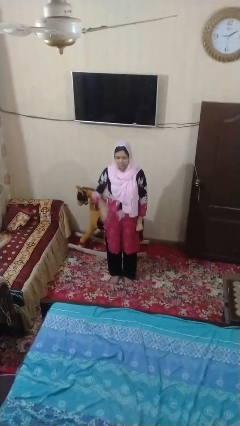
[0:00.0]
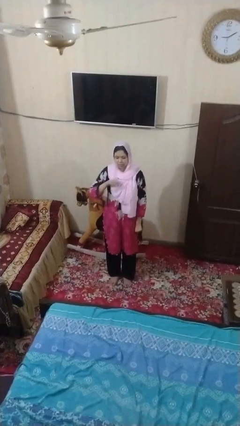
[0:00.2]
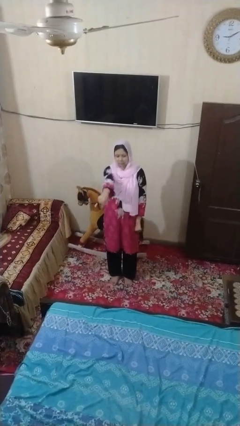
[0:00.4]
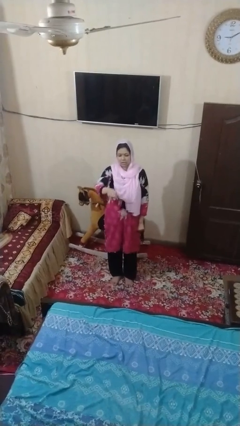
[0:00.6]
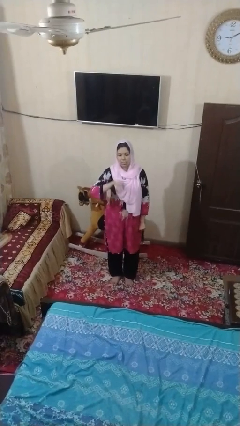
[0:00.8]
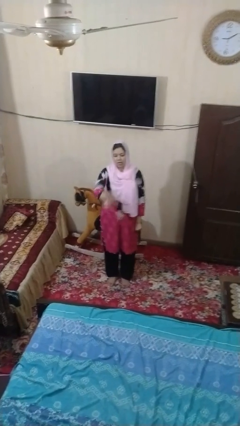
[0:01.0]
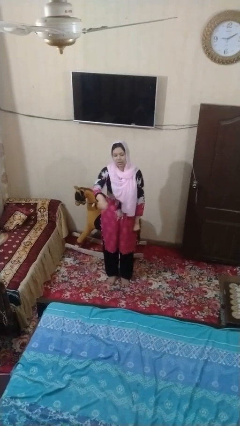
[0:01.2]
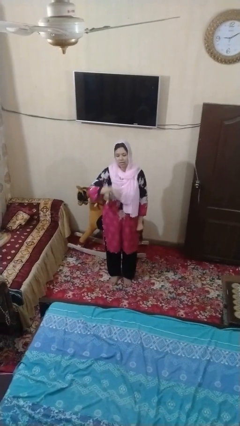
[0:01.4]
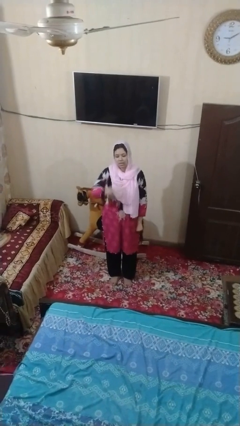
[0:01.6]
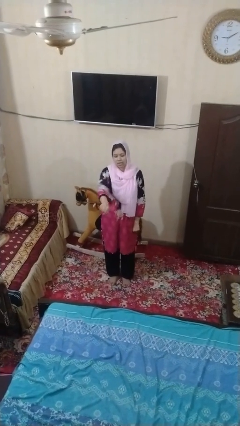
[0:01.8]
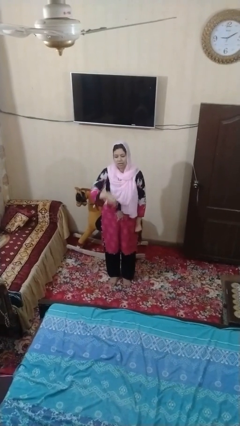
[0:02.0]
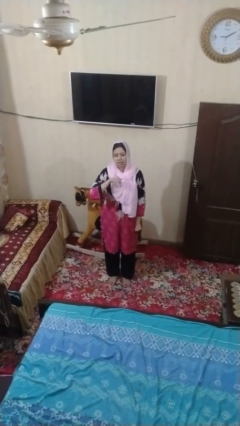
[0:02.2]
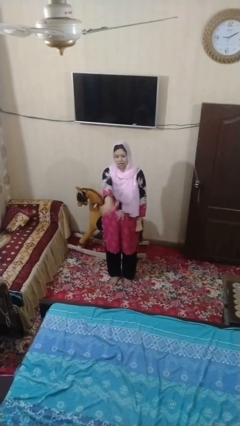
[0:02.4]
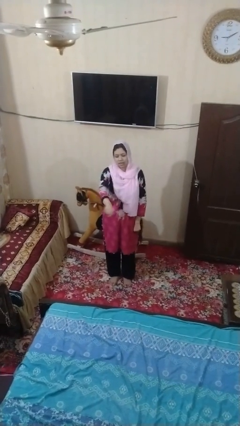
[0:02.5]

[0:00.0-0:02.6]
person punches

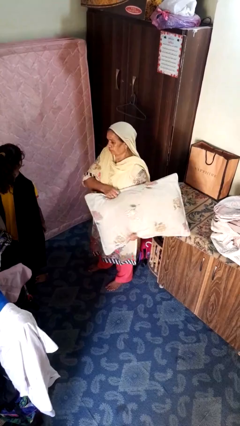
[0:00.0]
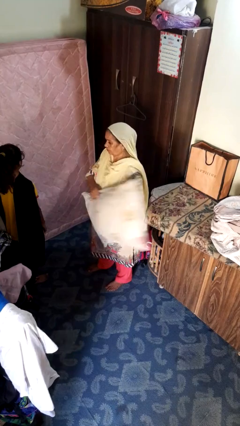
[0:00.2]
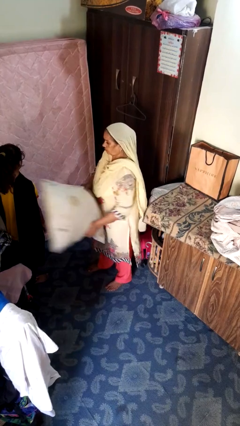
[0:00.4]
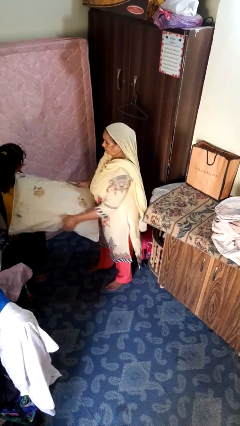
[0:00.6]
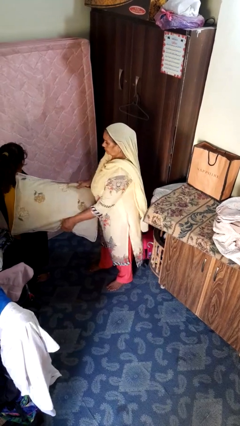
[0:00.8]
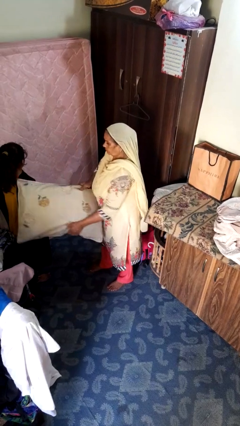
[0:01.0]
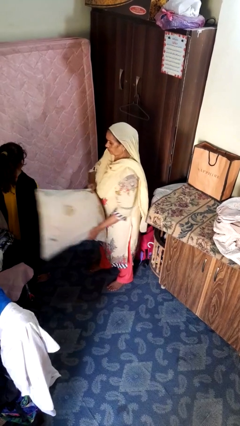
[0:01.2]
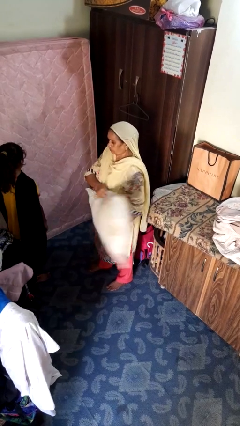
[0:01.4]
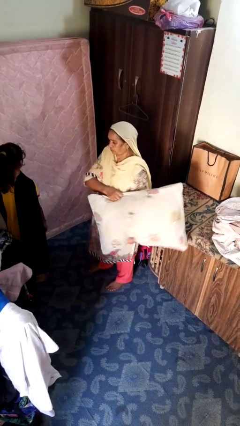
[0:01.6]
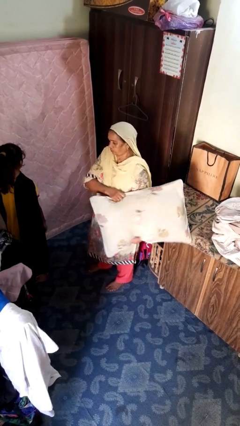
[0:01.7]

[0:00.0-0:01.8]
person hits person with pillow

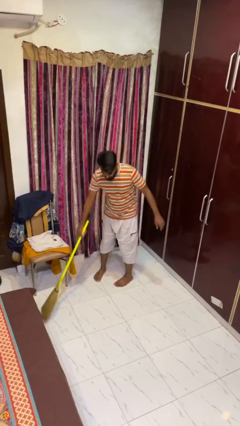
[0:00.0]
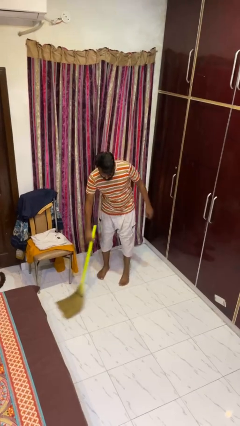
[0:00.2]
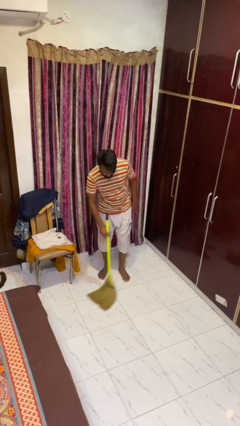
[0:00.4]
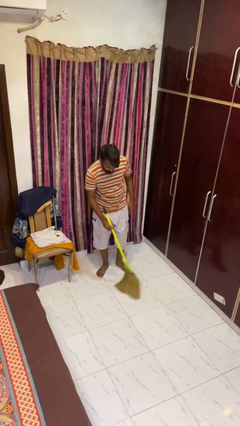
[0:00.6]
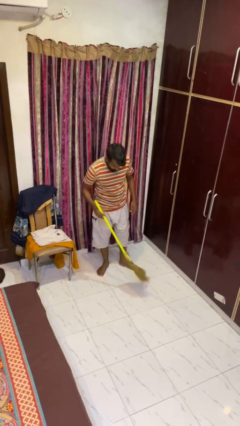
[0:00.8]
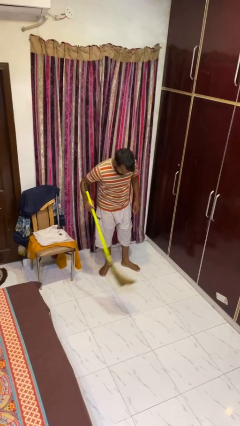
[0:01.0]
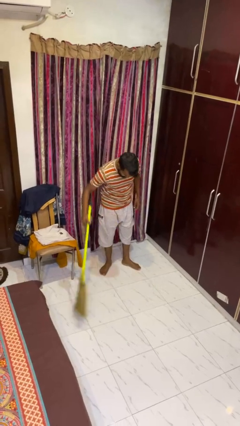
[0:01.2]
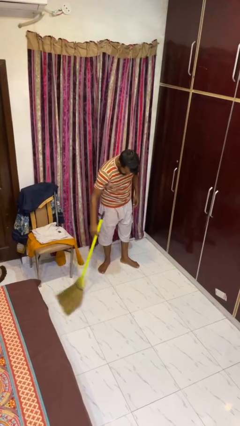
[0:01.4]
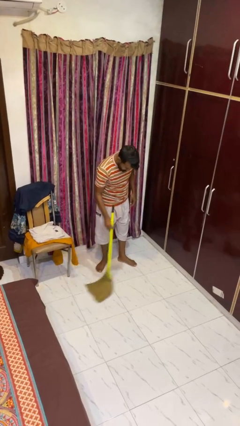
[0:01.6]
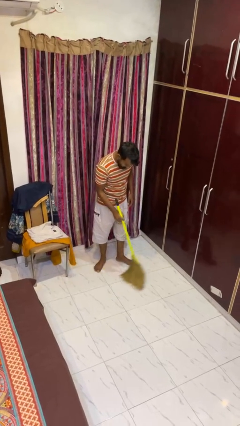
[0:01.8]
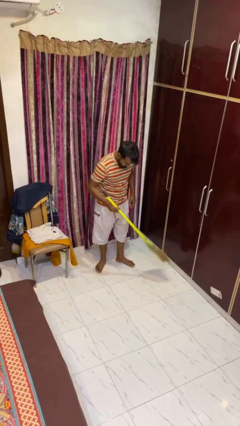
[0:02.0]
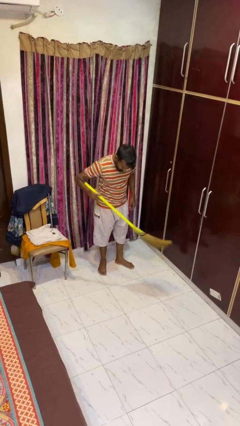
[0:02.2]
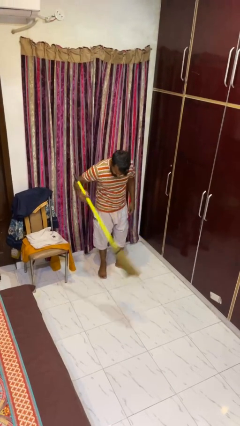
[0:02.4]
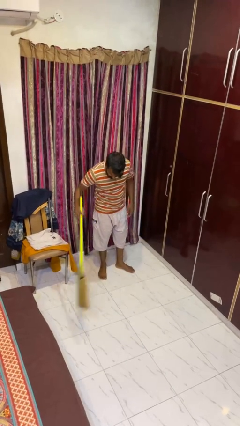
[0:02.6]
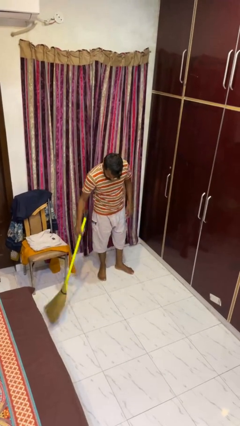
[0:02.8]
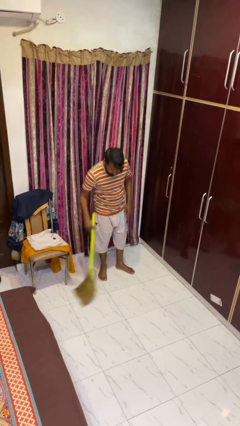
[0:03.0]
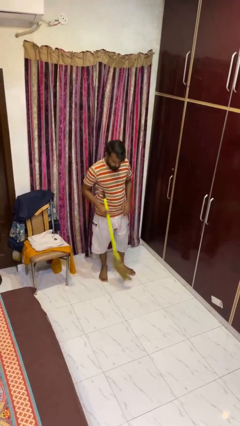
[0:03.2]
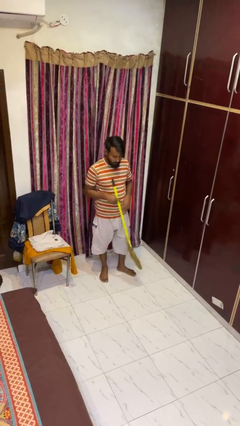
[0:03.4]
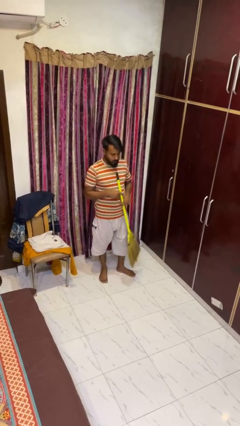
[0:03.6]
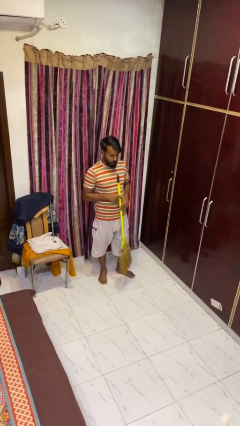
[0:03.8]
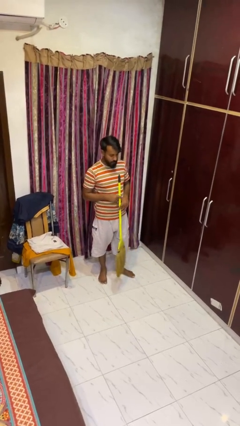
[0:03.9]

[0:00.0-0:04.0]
person sweeps floor

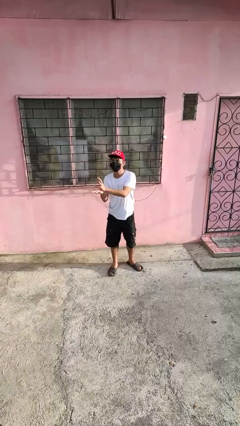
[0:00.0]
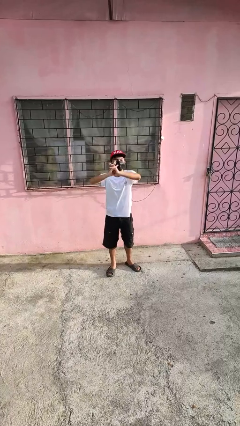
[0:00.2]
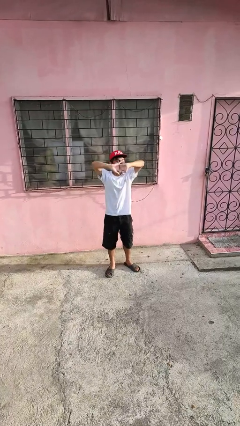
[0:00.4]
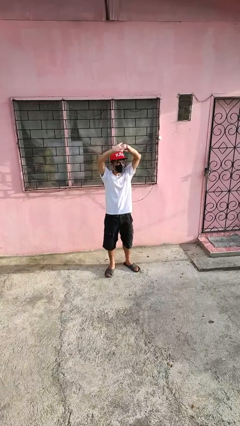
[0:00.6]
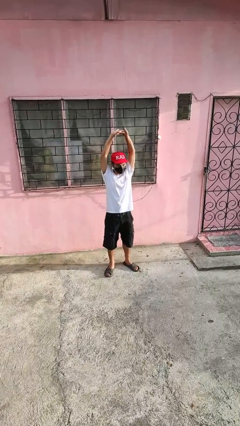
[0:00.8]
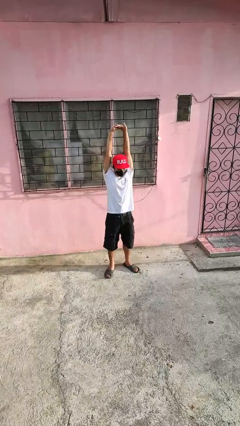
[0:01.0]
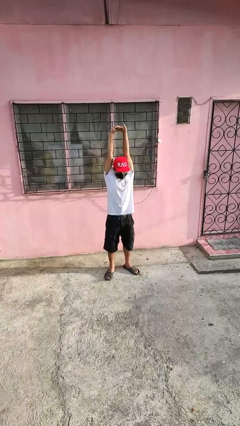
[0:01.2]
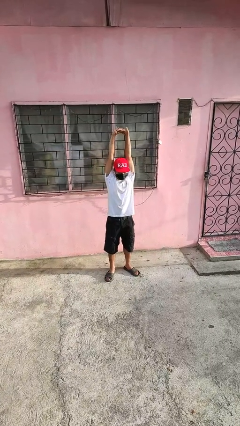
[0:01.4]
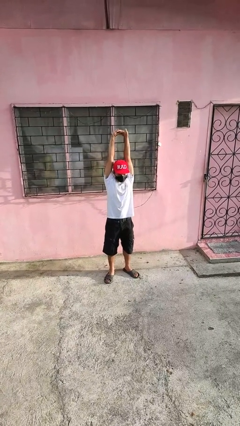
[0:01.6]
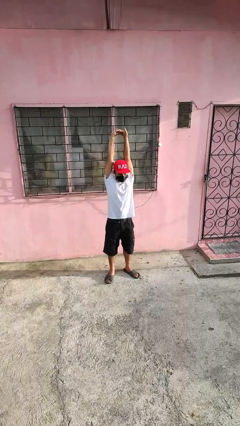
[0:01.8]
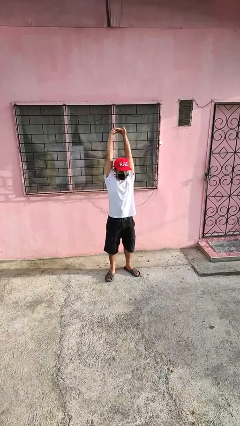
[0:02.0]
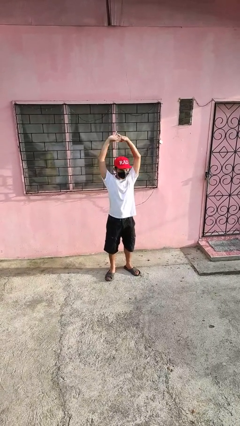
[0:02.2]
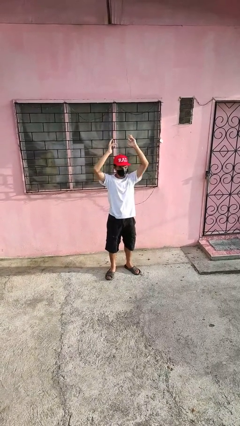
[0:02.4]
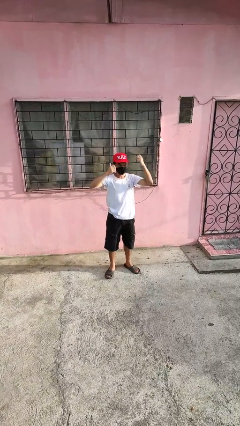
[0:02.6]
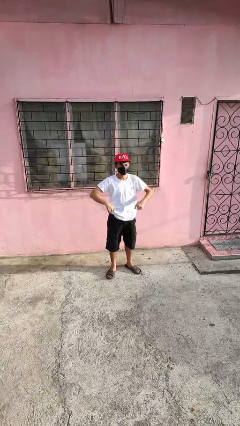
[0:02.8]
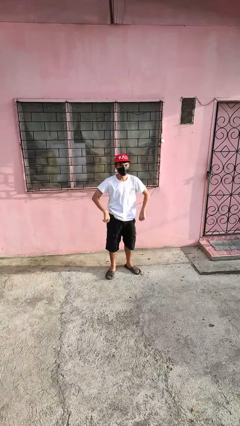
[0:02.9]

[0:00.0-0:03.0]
person stretches arms over head

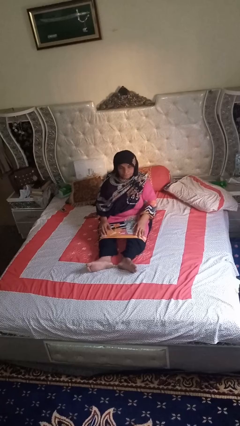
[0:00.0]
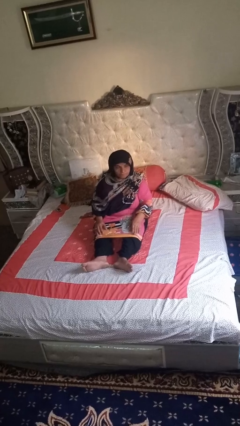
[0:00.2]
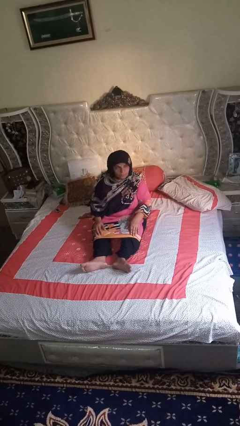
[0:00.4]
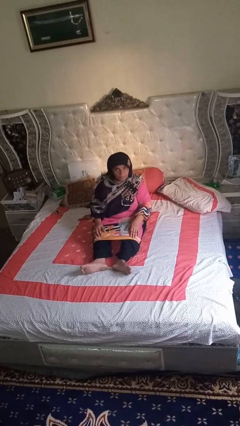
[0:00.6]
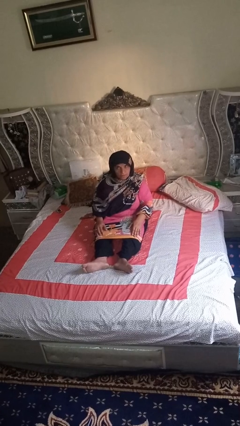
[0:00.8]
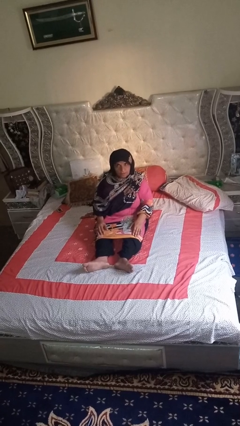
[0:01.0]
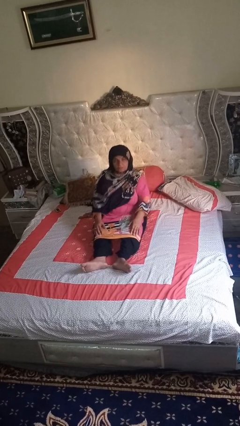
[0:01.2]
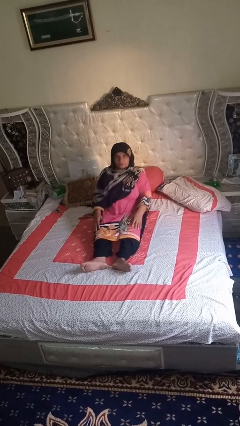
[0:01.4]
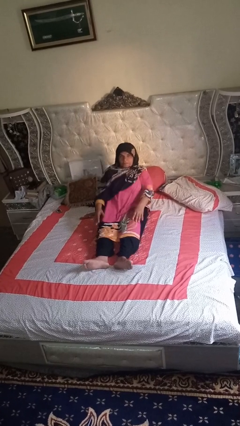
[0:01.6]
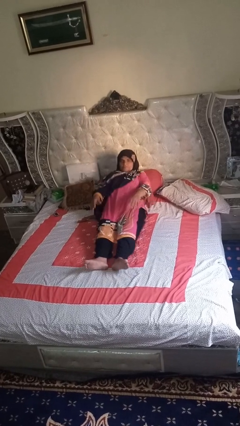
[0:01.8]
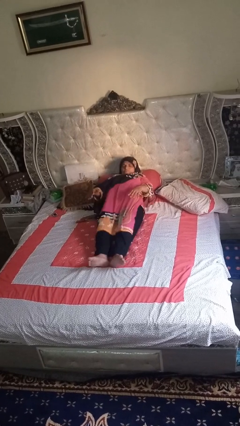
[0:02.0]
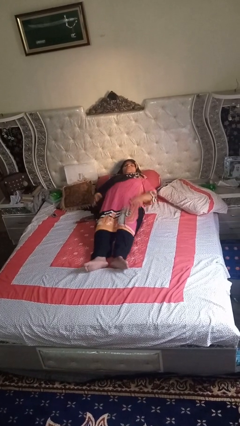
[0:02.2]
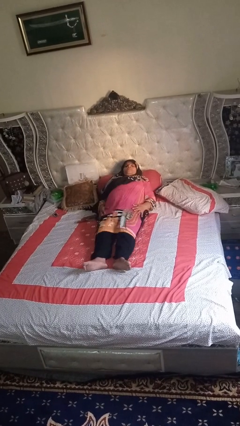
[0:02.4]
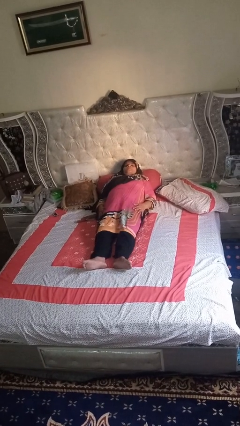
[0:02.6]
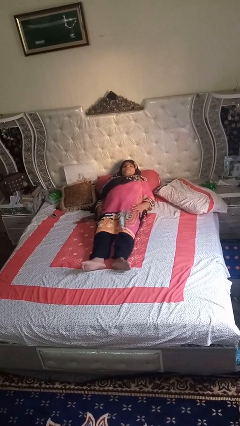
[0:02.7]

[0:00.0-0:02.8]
person lies down on bed

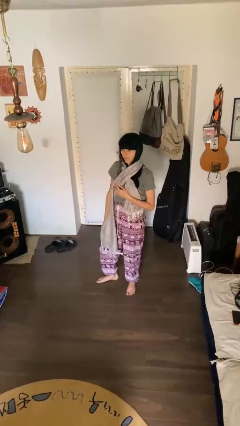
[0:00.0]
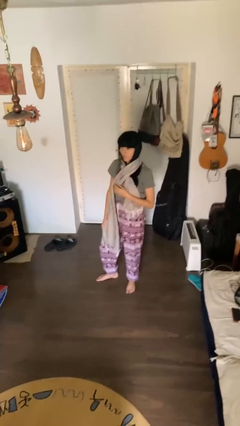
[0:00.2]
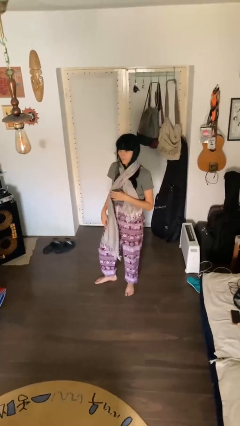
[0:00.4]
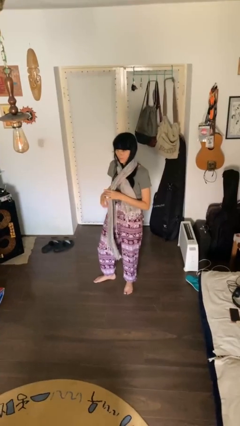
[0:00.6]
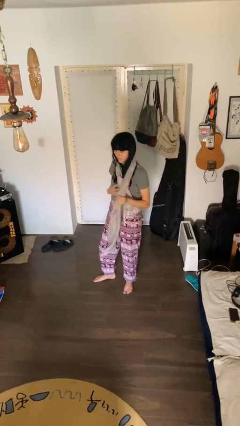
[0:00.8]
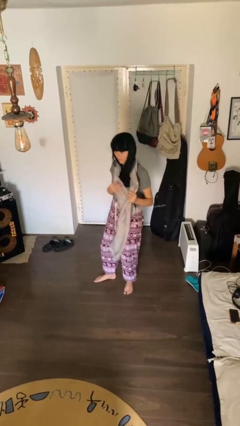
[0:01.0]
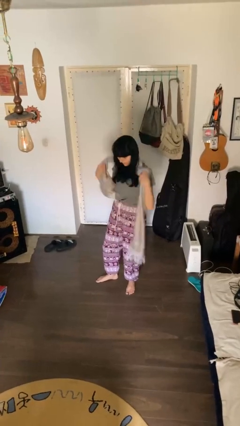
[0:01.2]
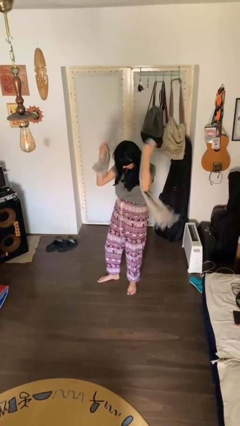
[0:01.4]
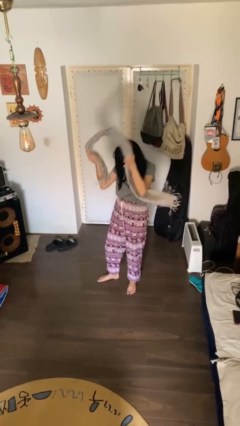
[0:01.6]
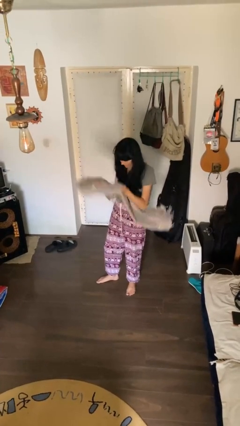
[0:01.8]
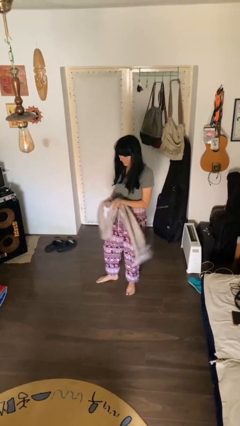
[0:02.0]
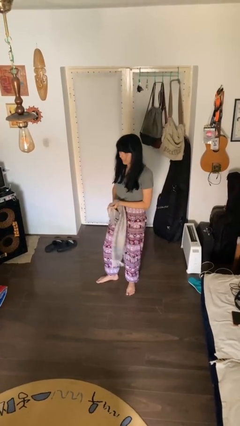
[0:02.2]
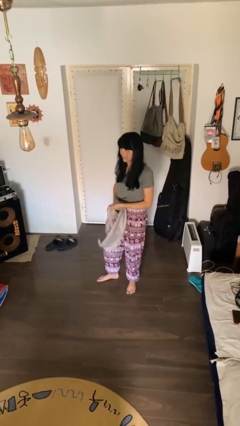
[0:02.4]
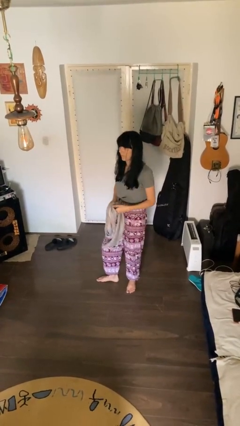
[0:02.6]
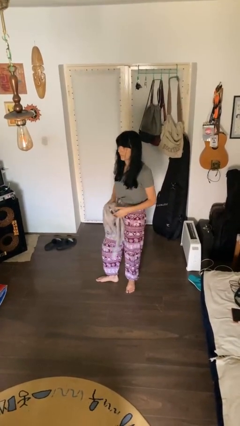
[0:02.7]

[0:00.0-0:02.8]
person takes off scarf
